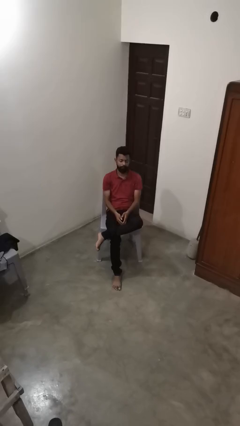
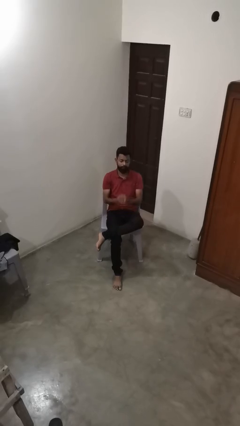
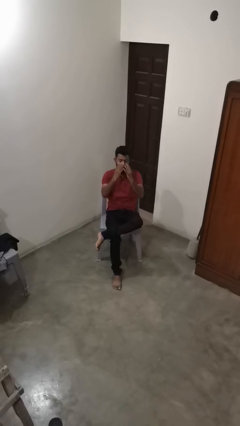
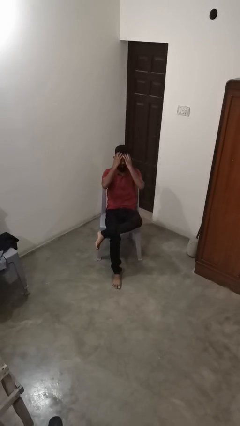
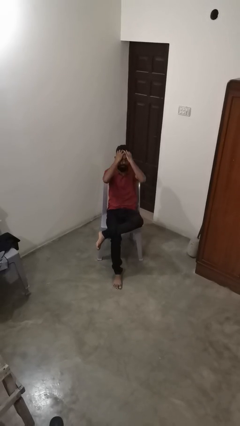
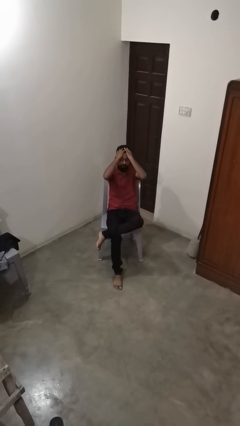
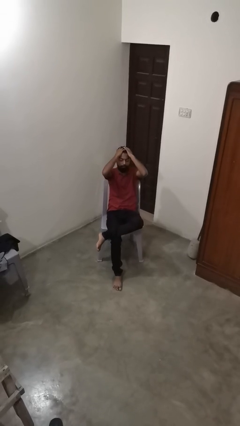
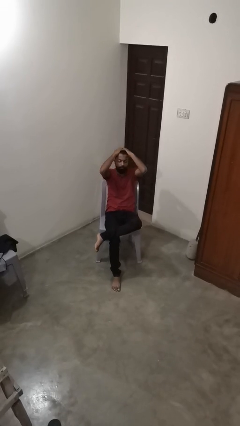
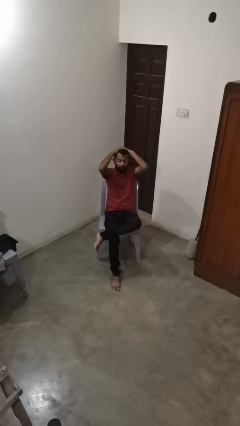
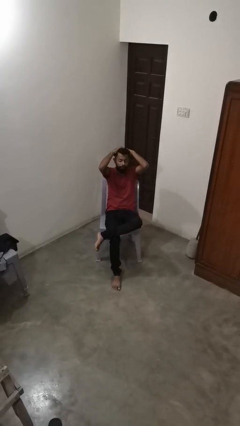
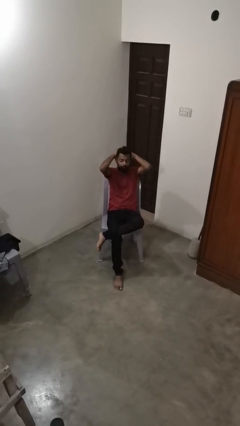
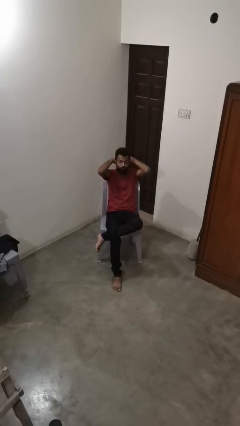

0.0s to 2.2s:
person strokes hair

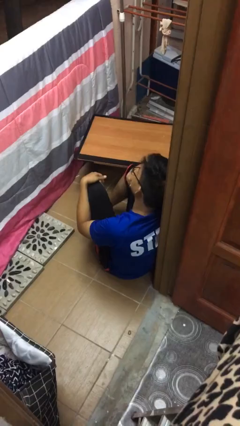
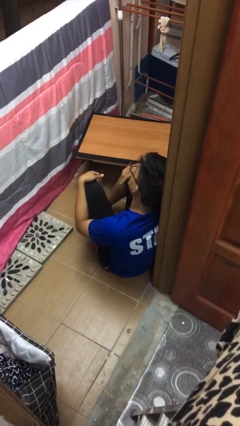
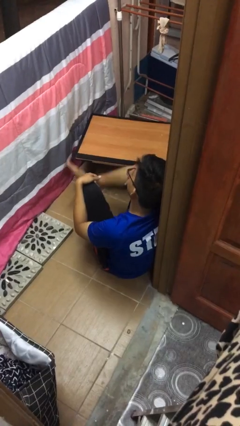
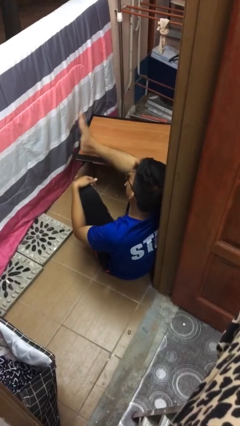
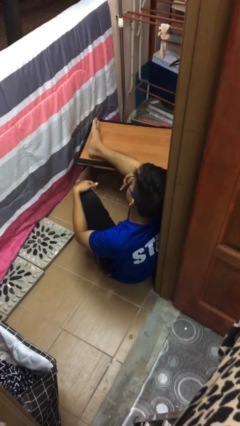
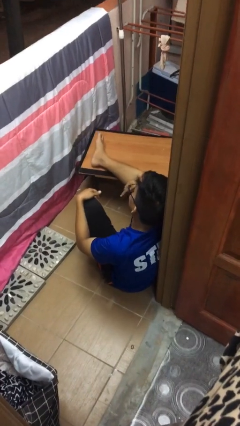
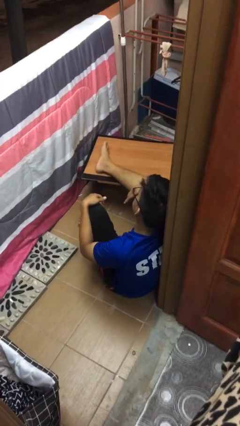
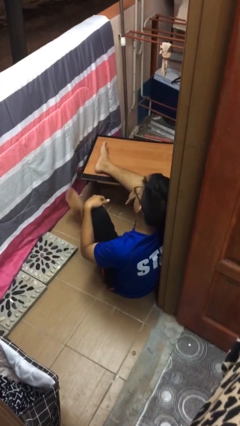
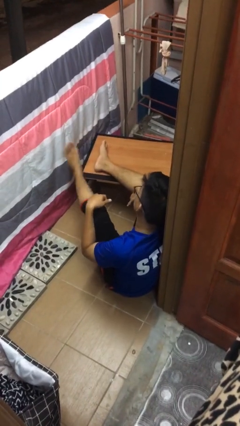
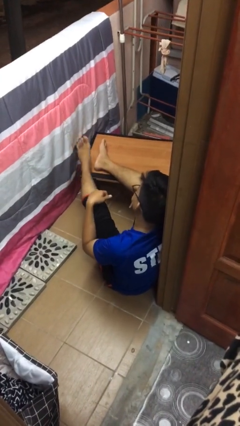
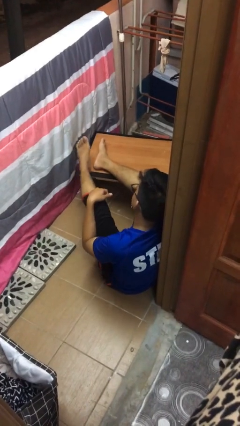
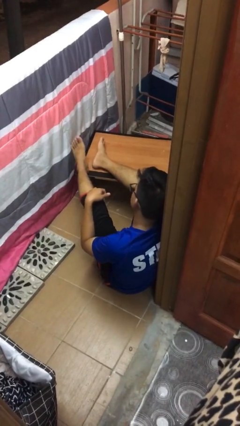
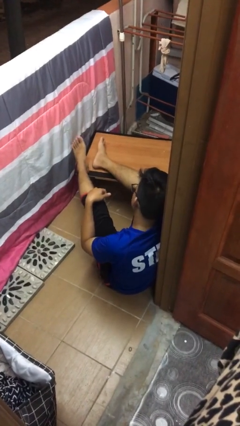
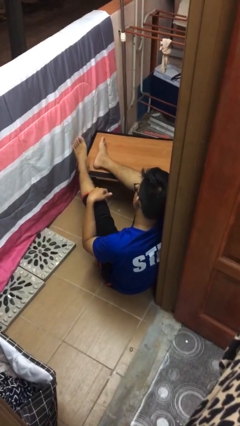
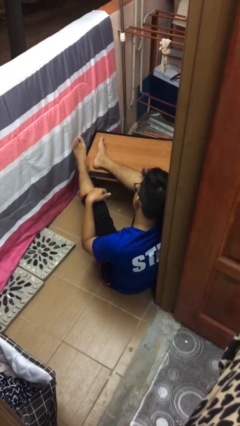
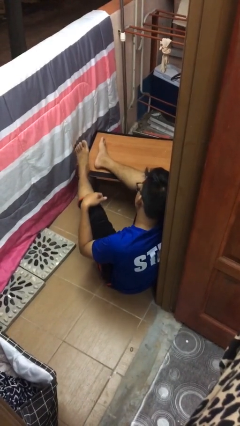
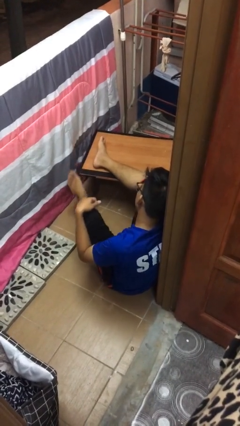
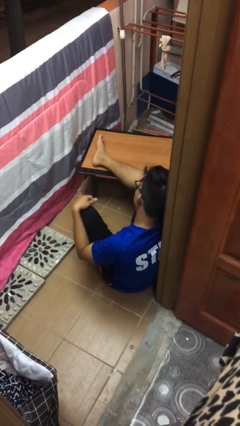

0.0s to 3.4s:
person puts feet up

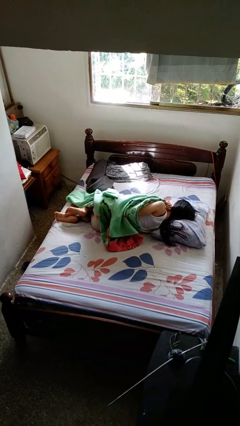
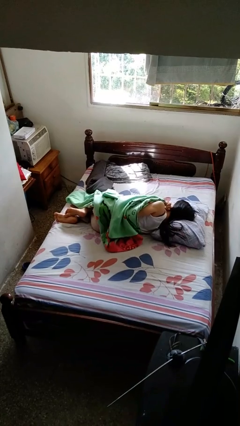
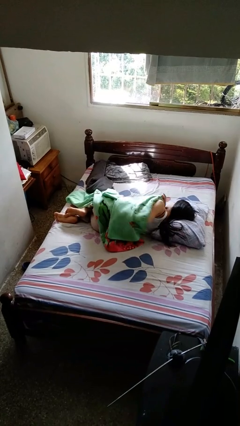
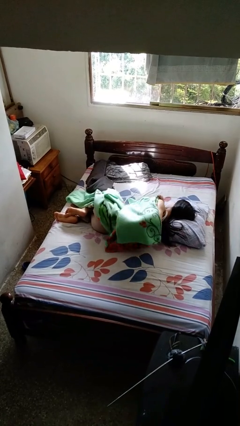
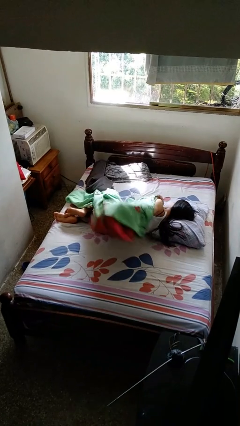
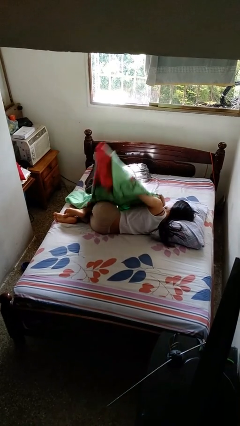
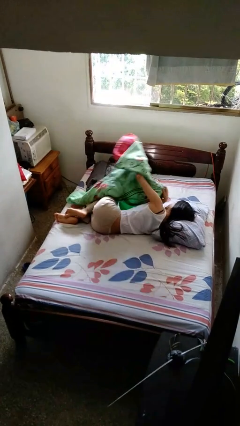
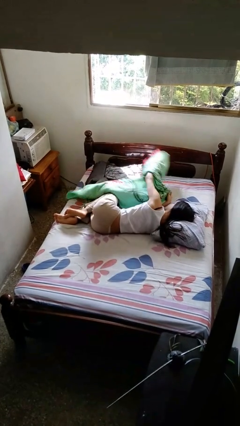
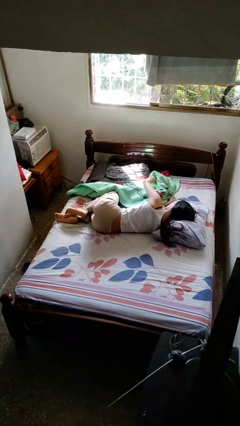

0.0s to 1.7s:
person uncovers with bedsheets

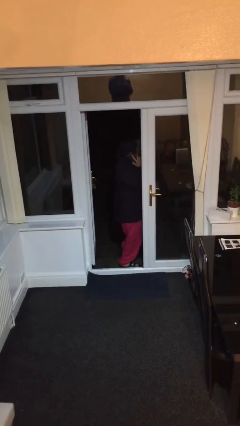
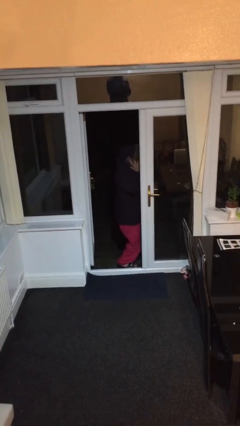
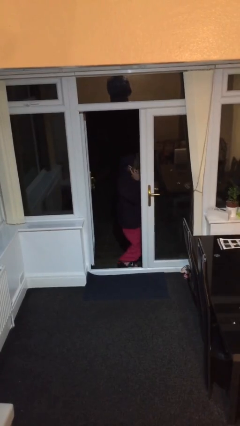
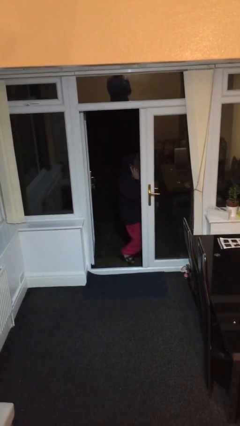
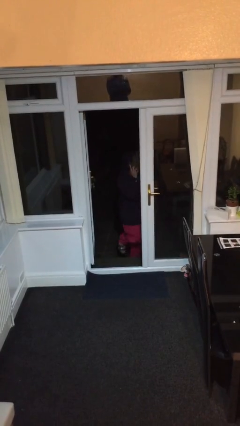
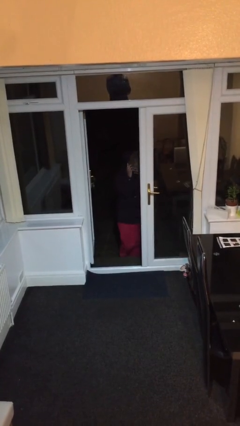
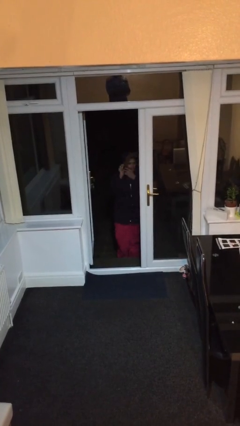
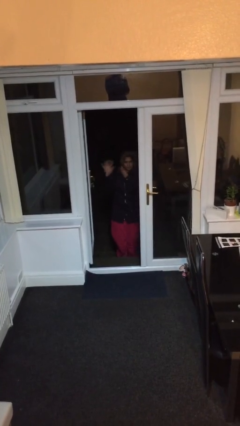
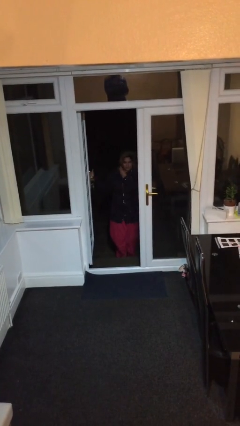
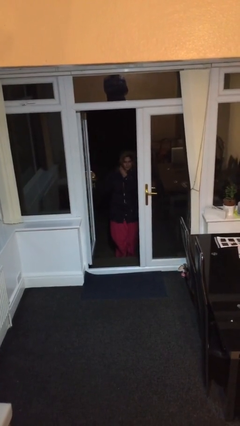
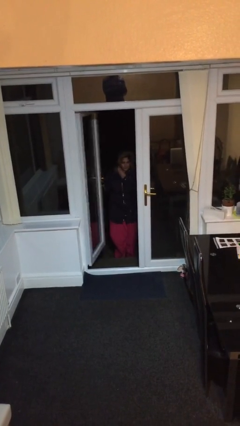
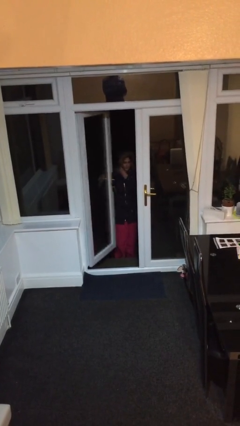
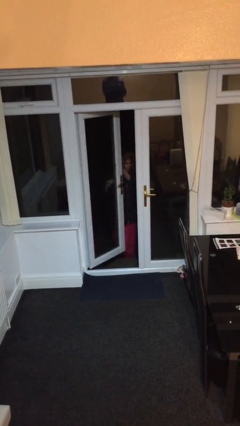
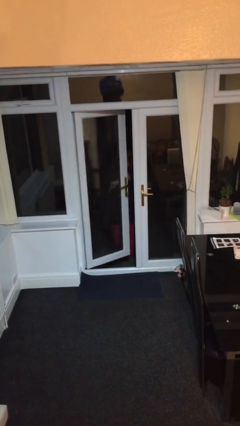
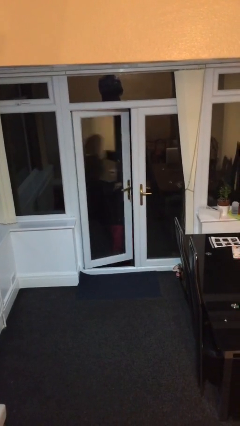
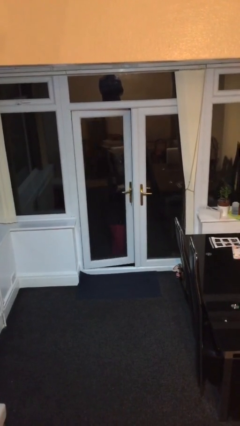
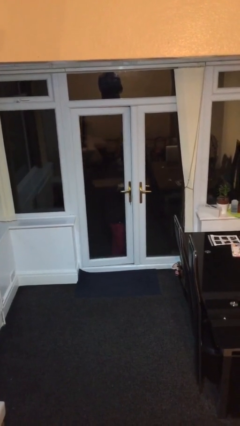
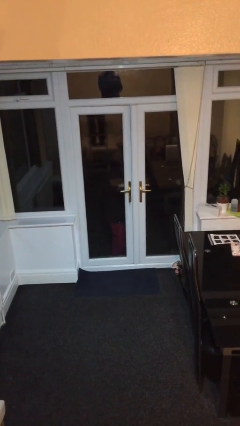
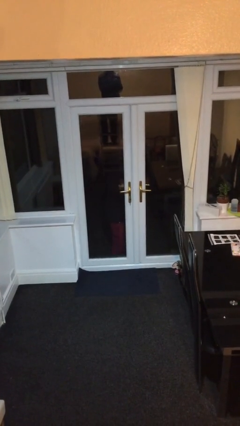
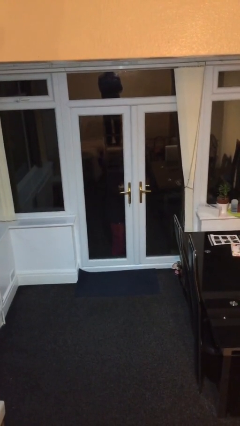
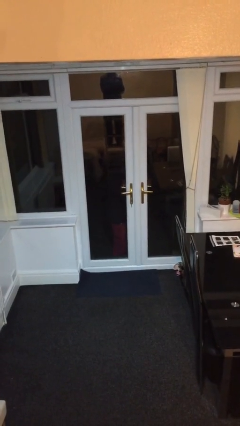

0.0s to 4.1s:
person closes facility door

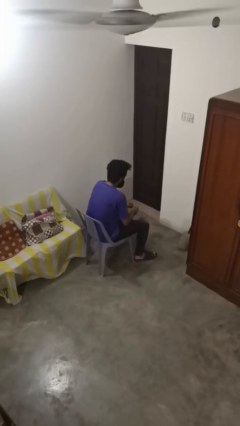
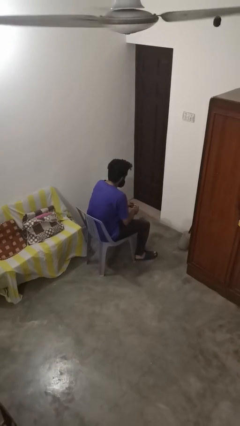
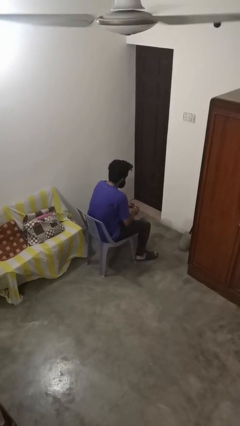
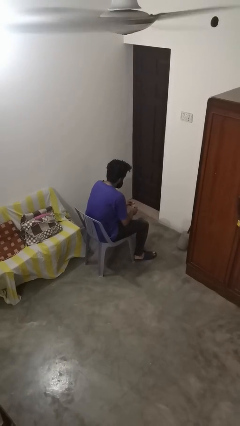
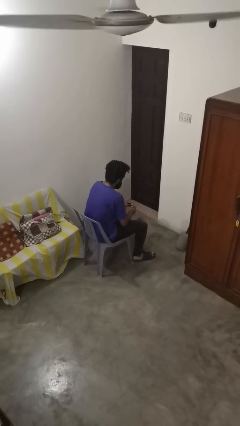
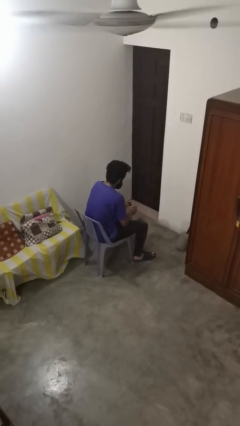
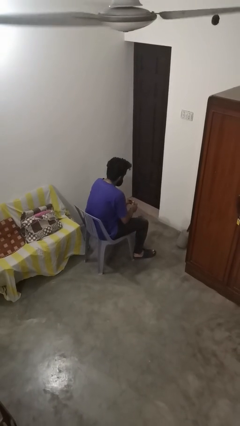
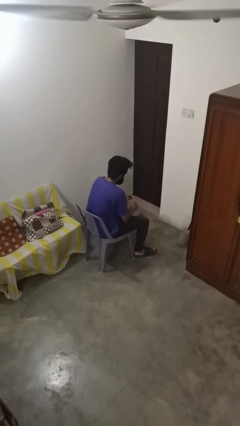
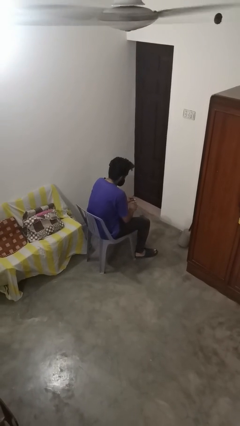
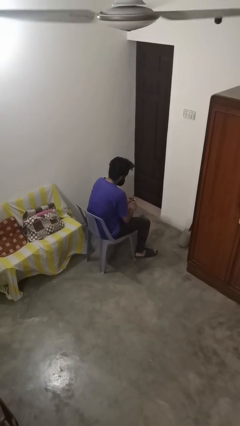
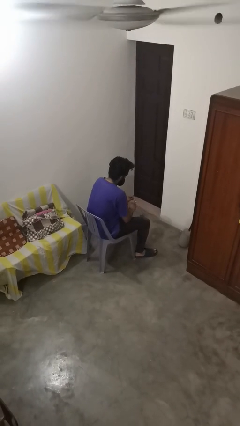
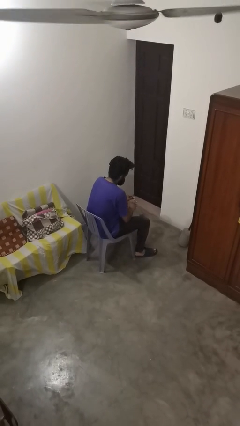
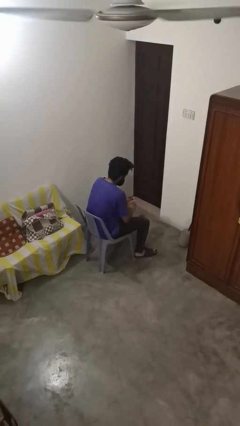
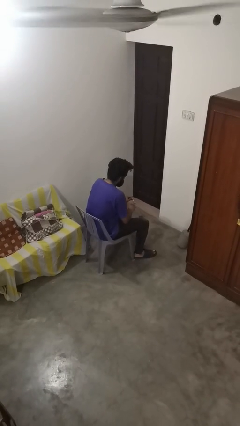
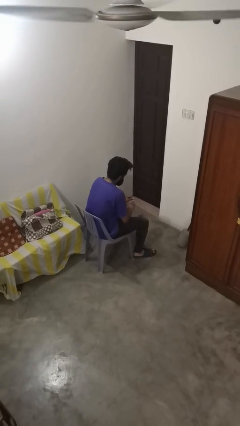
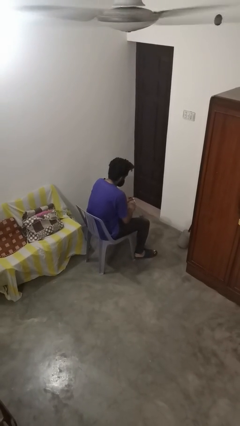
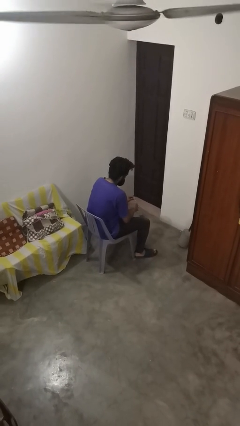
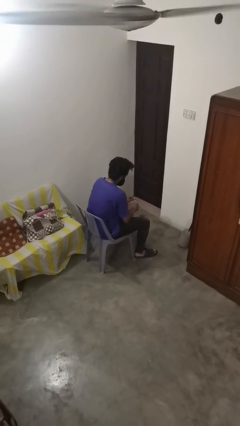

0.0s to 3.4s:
person paints fingernails

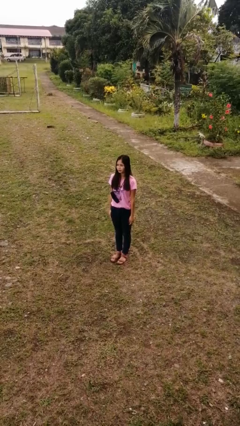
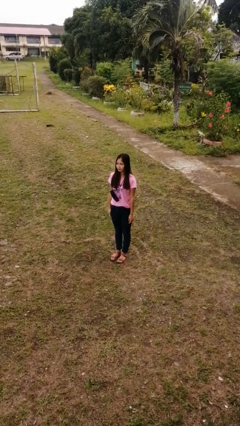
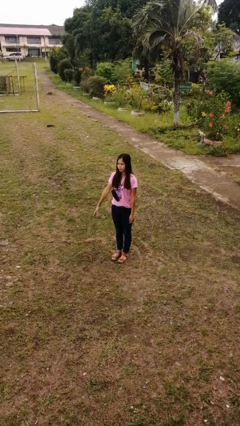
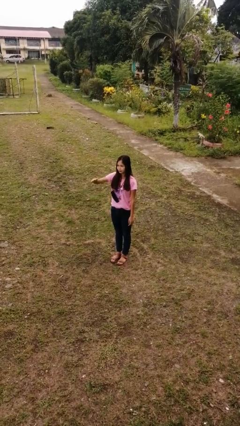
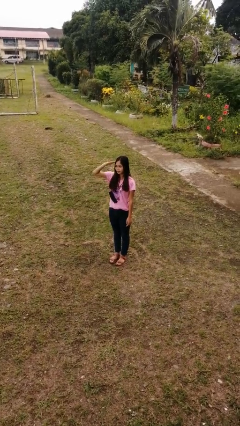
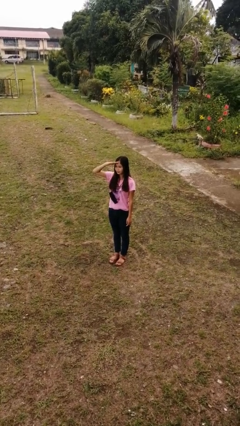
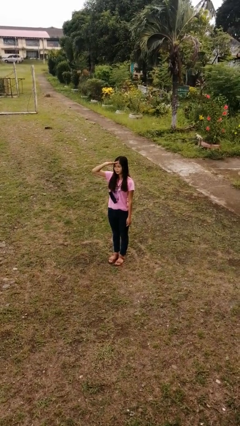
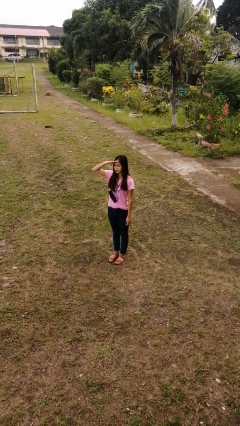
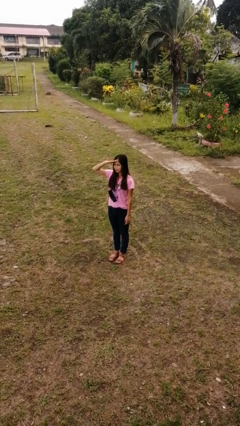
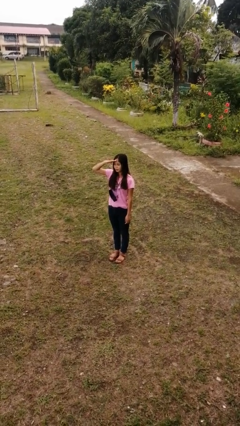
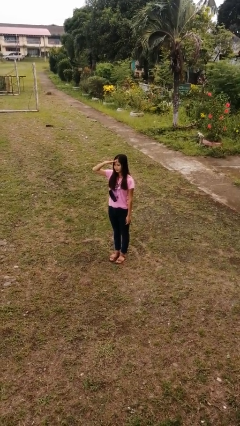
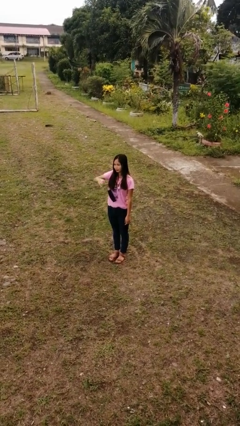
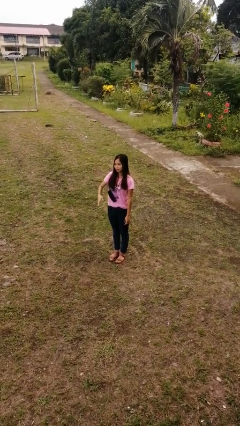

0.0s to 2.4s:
person salutes
